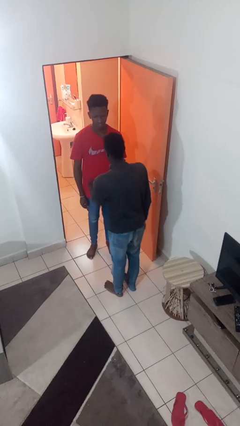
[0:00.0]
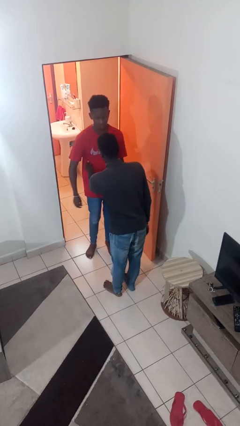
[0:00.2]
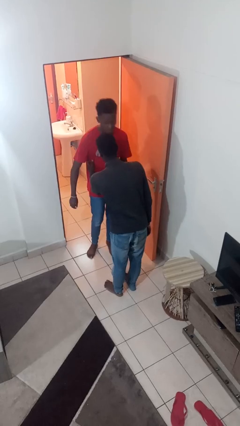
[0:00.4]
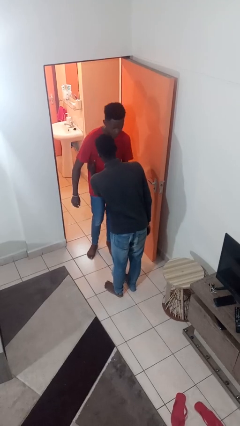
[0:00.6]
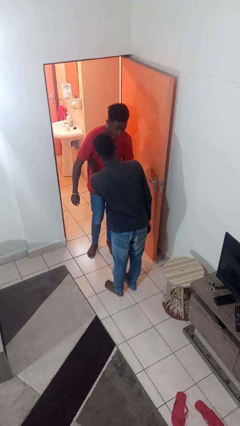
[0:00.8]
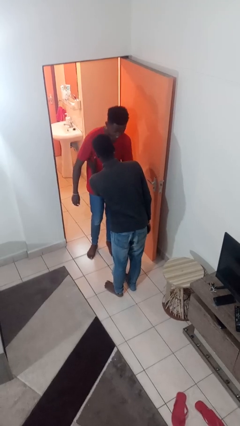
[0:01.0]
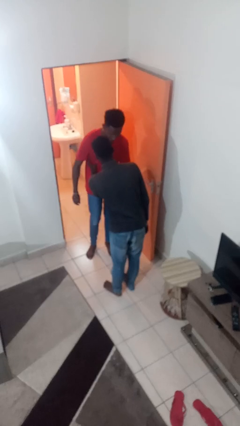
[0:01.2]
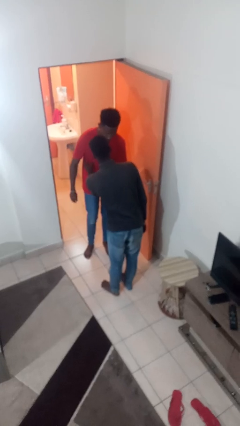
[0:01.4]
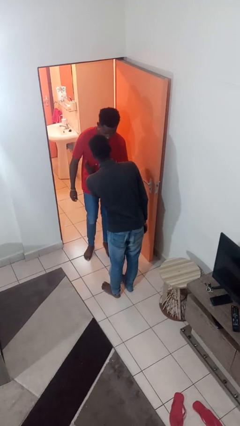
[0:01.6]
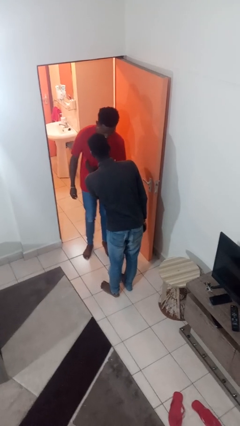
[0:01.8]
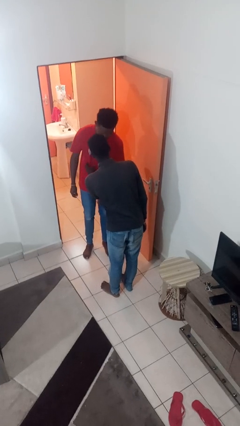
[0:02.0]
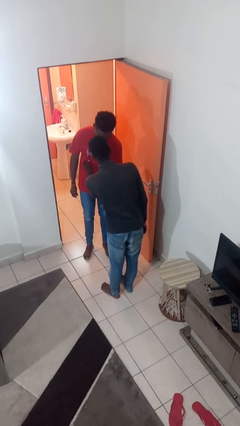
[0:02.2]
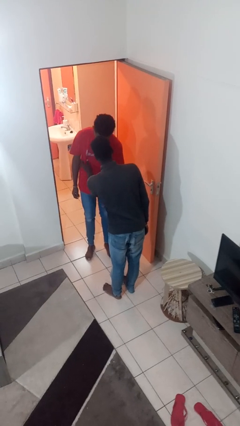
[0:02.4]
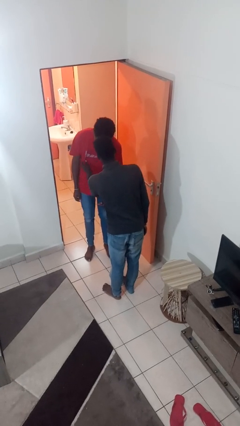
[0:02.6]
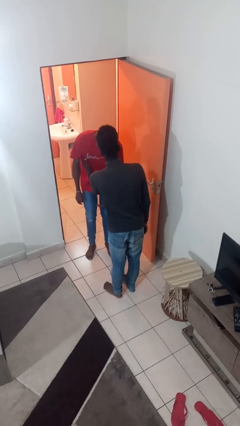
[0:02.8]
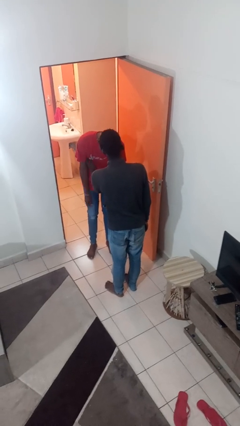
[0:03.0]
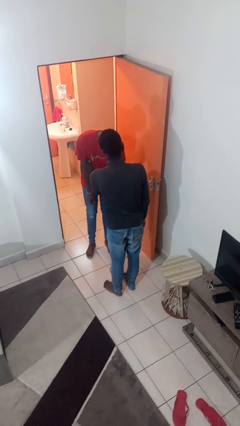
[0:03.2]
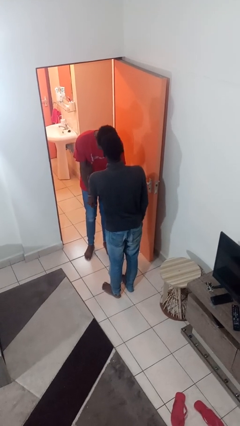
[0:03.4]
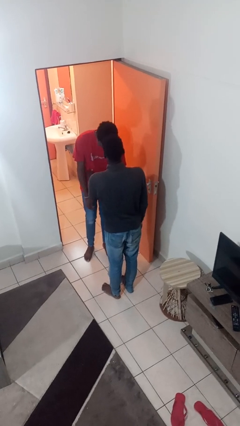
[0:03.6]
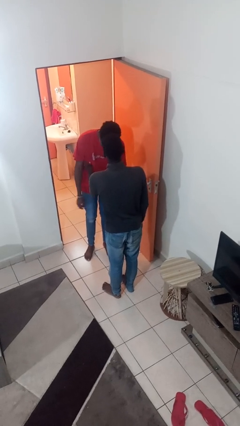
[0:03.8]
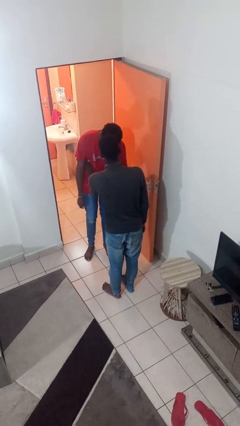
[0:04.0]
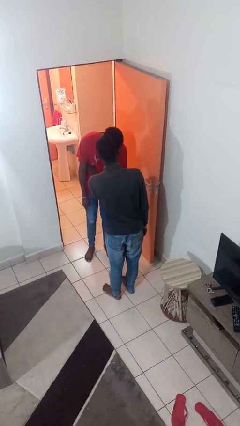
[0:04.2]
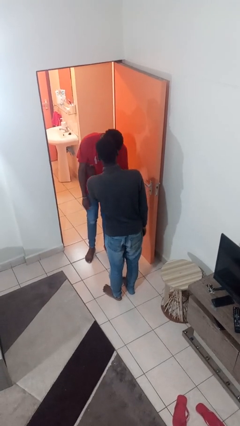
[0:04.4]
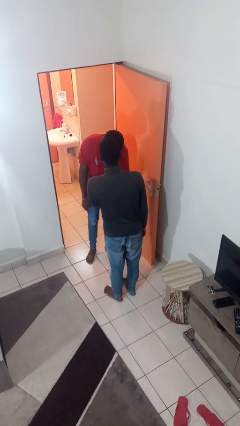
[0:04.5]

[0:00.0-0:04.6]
person tickles person

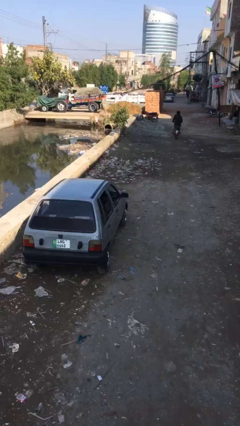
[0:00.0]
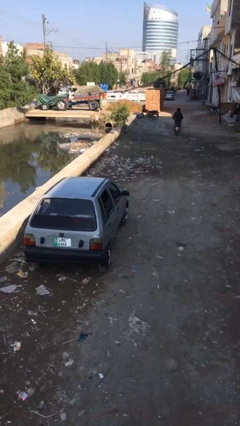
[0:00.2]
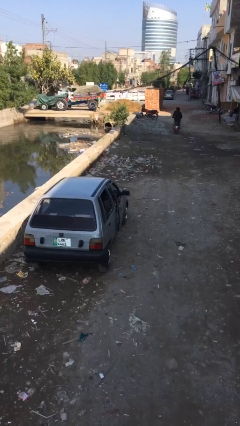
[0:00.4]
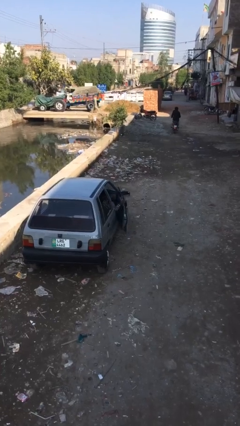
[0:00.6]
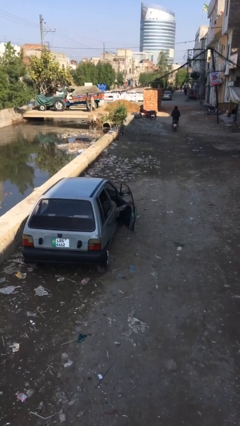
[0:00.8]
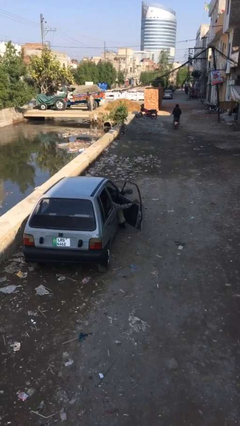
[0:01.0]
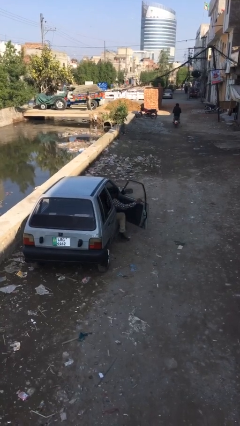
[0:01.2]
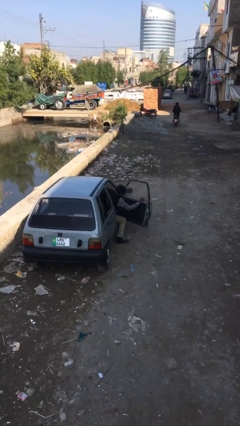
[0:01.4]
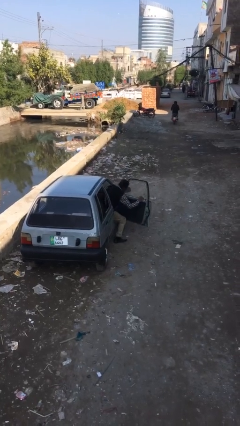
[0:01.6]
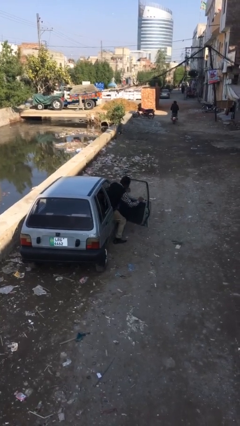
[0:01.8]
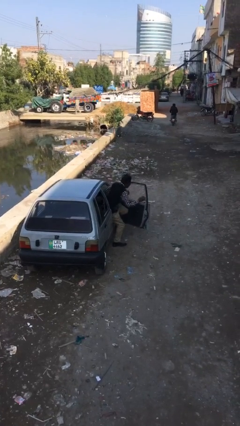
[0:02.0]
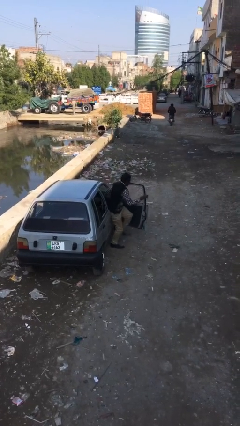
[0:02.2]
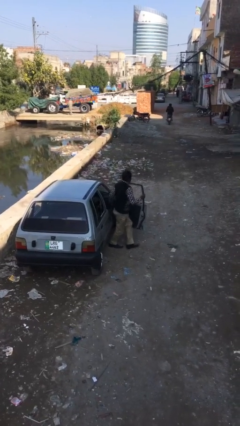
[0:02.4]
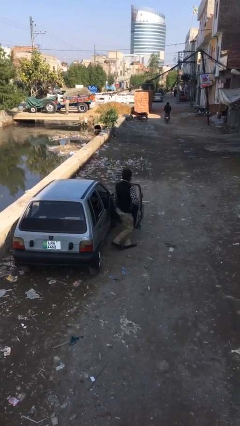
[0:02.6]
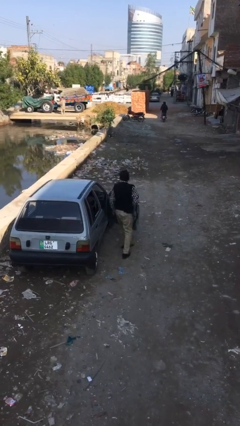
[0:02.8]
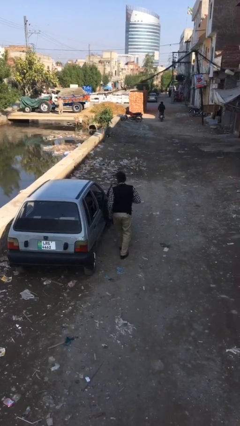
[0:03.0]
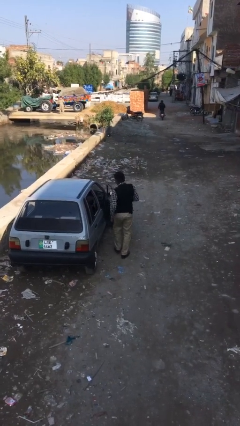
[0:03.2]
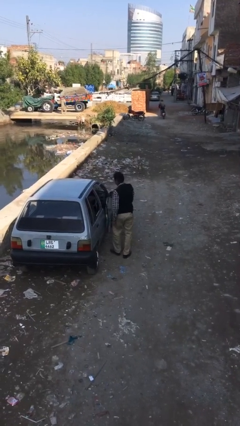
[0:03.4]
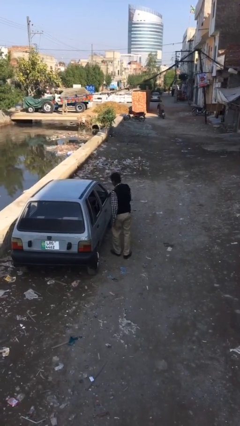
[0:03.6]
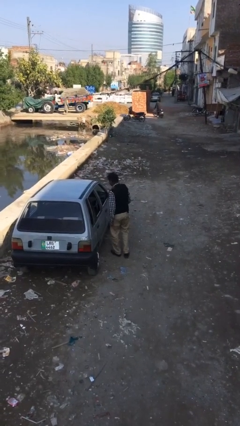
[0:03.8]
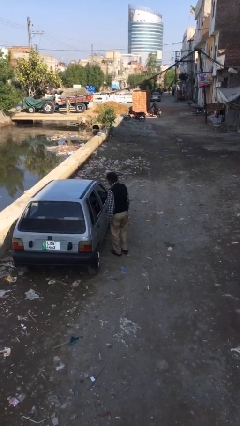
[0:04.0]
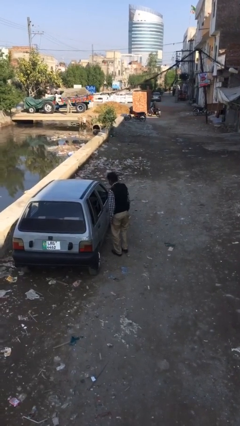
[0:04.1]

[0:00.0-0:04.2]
person exits car

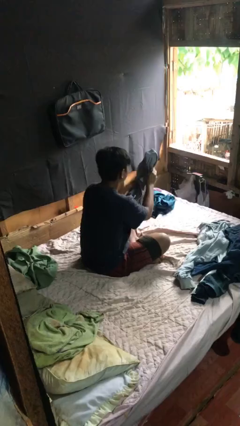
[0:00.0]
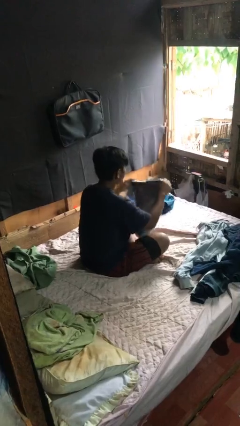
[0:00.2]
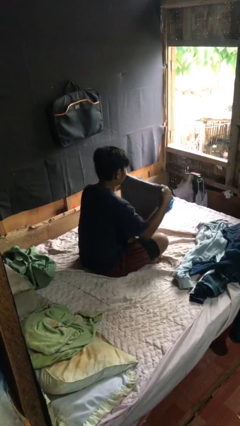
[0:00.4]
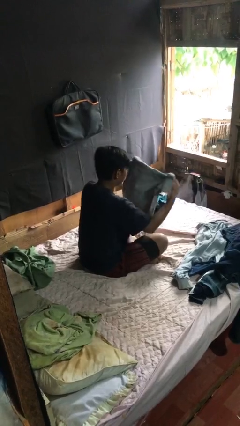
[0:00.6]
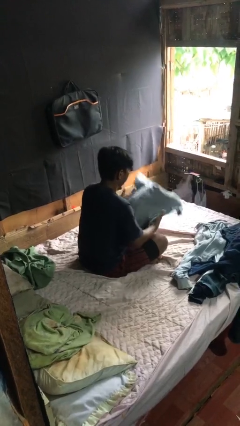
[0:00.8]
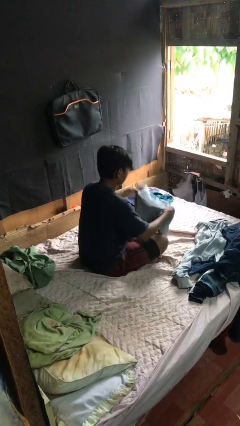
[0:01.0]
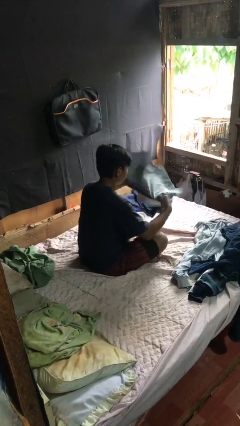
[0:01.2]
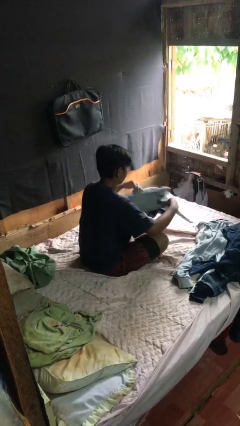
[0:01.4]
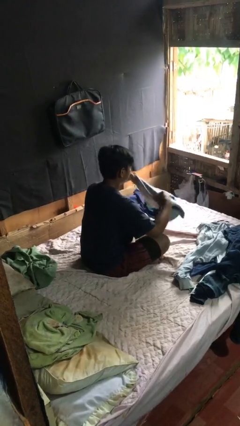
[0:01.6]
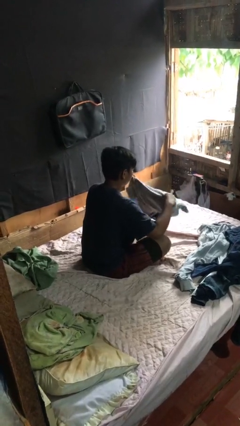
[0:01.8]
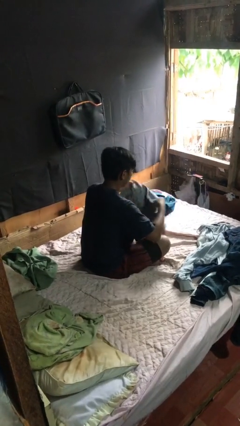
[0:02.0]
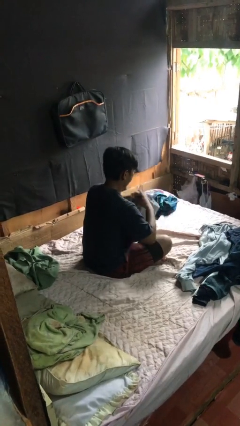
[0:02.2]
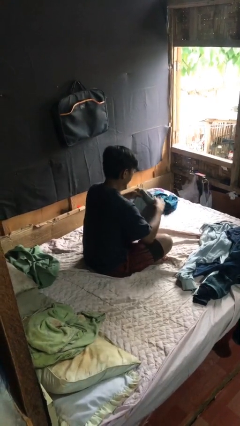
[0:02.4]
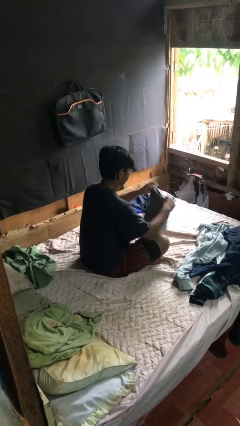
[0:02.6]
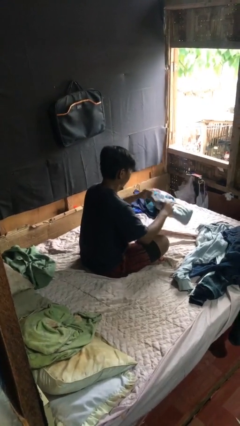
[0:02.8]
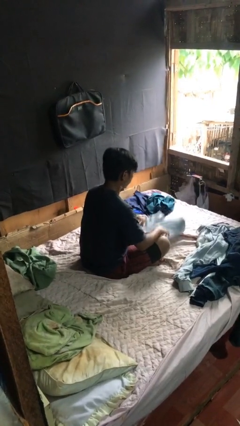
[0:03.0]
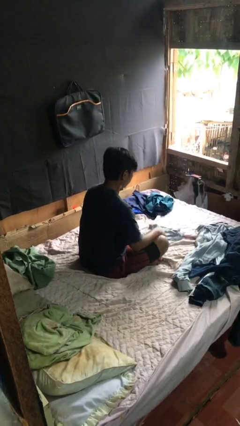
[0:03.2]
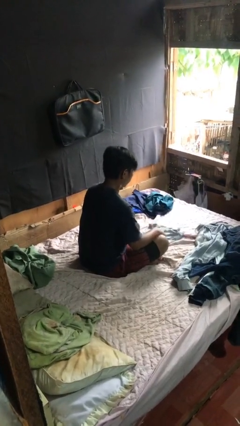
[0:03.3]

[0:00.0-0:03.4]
person folds shirt

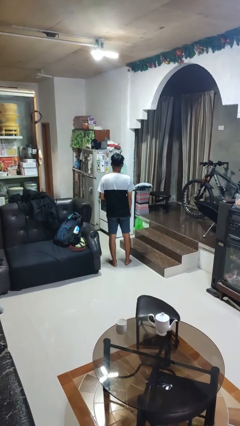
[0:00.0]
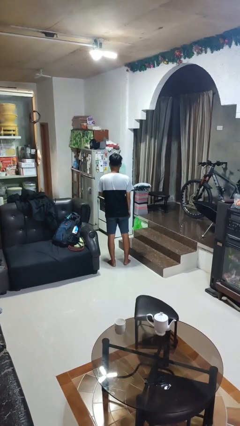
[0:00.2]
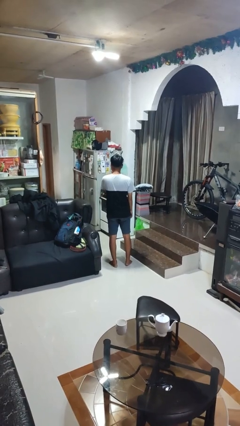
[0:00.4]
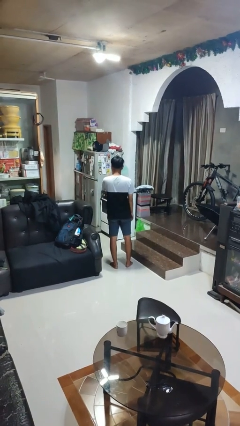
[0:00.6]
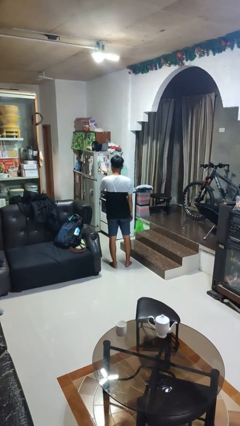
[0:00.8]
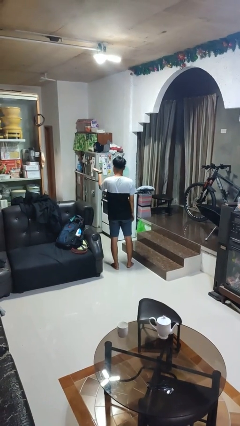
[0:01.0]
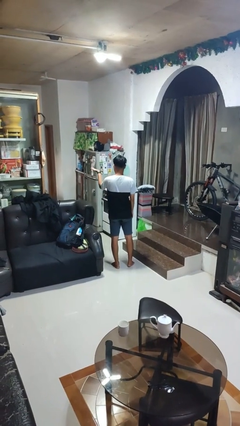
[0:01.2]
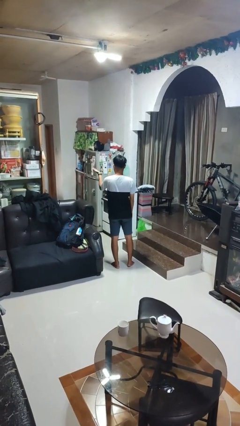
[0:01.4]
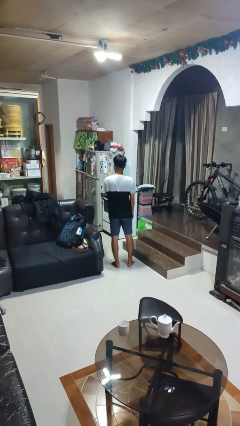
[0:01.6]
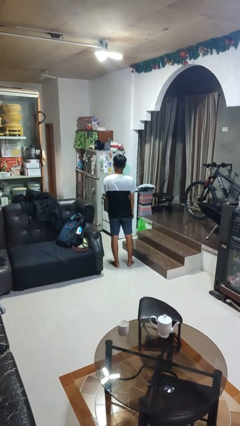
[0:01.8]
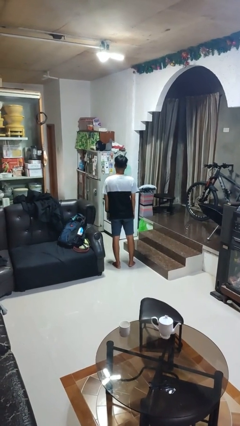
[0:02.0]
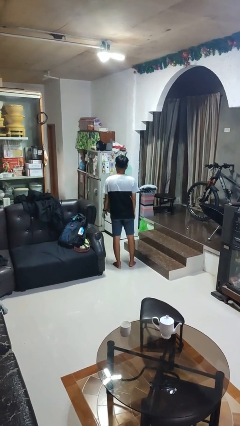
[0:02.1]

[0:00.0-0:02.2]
person gestures blow kiss

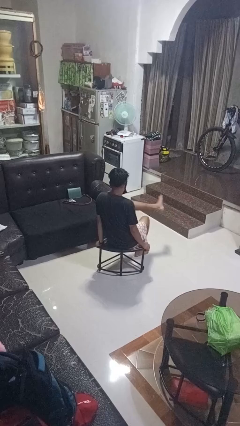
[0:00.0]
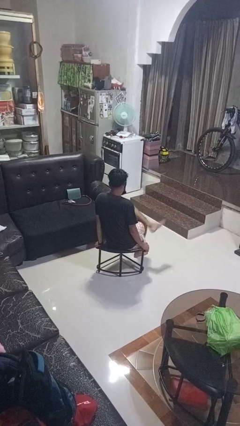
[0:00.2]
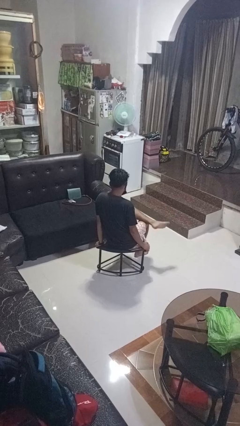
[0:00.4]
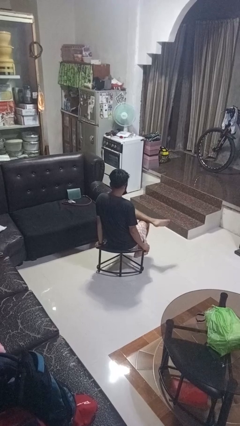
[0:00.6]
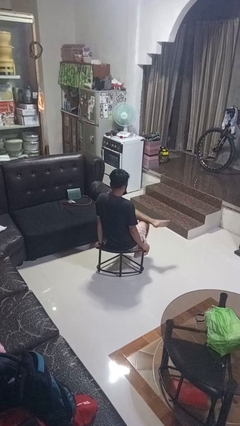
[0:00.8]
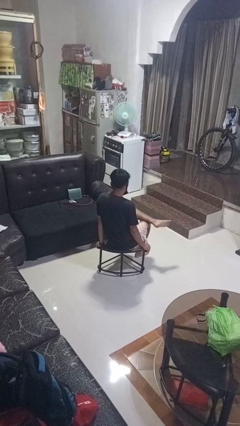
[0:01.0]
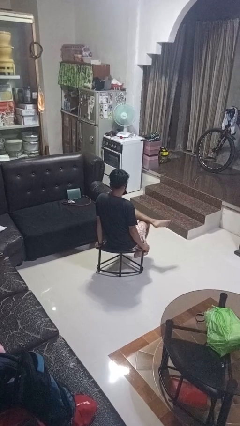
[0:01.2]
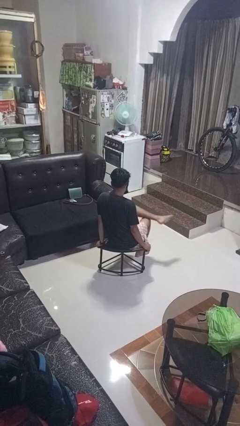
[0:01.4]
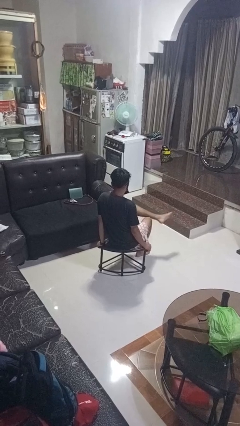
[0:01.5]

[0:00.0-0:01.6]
person crosses legs

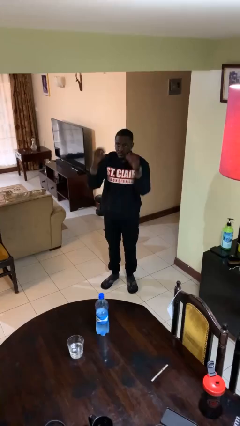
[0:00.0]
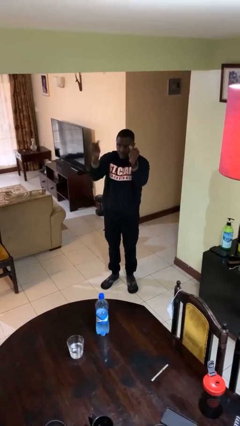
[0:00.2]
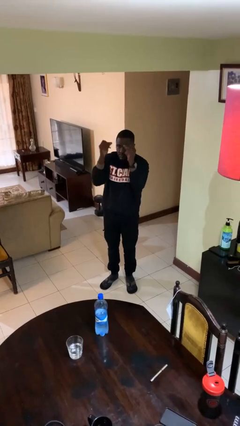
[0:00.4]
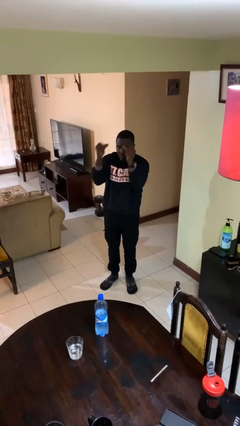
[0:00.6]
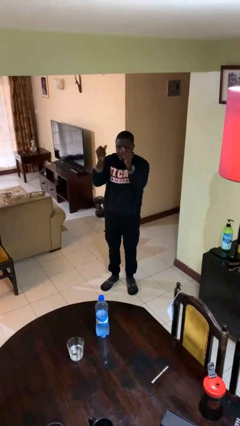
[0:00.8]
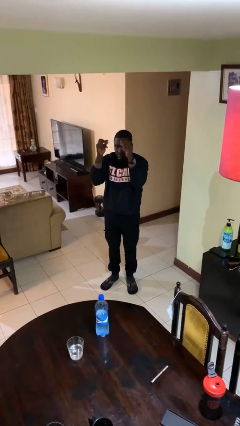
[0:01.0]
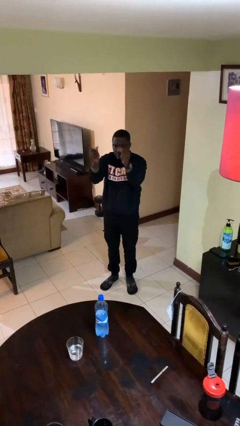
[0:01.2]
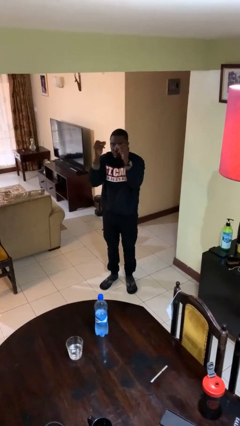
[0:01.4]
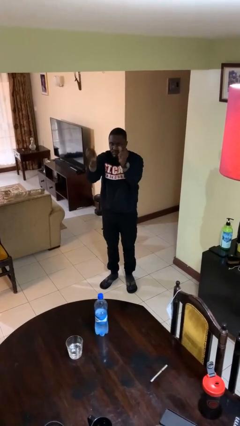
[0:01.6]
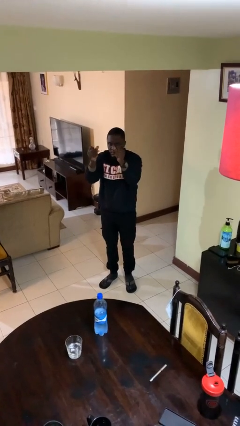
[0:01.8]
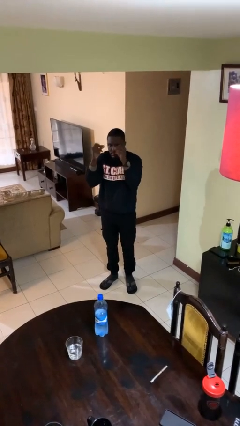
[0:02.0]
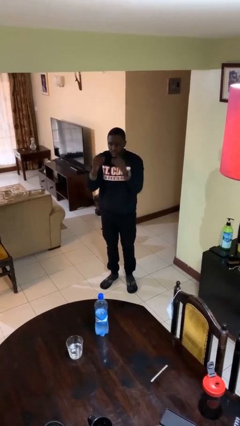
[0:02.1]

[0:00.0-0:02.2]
person snaps fingers
